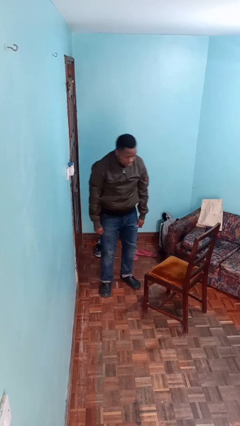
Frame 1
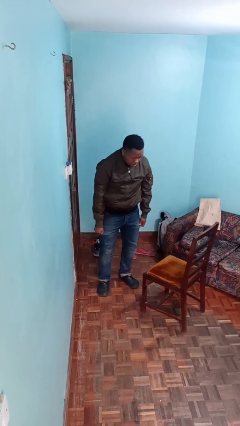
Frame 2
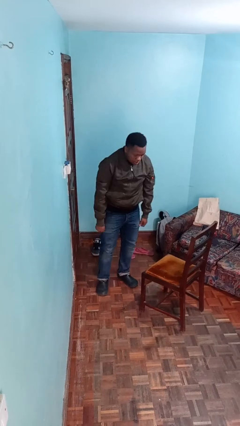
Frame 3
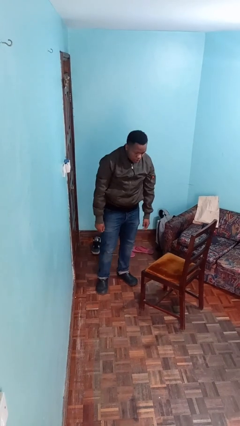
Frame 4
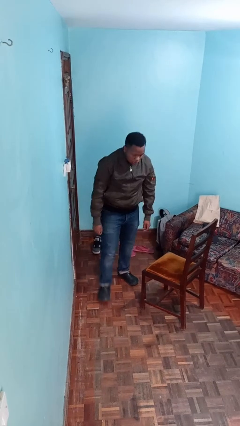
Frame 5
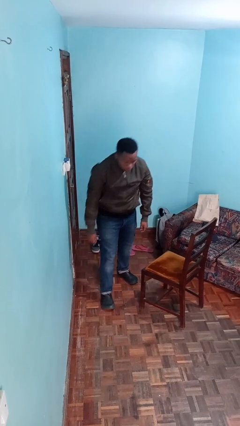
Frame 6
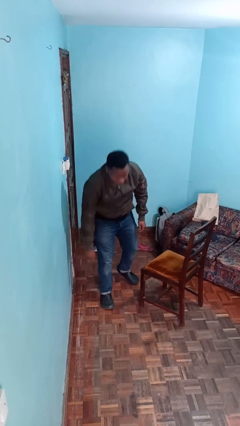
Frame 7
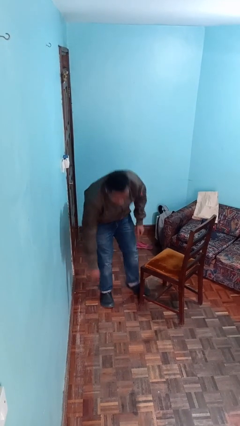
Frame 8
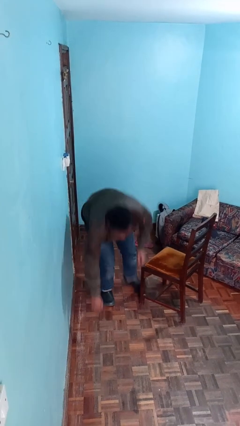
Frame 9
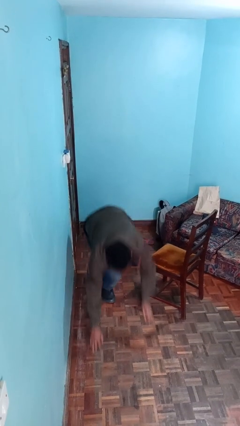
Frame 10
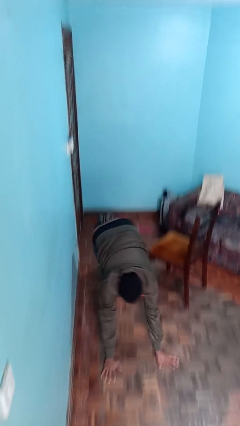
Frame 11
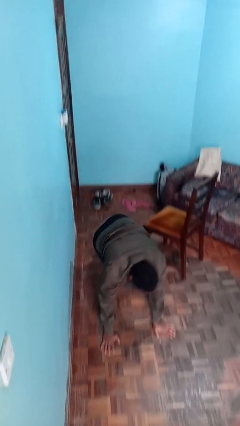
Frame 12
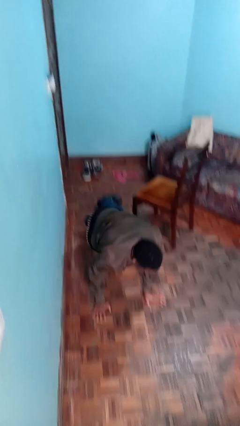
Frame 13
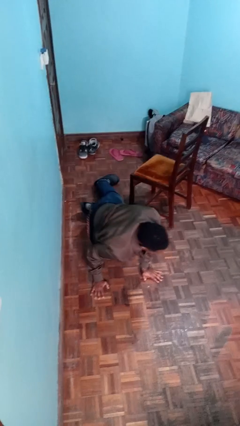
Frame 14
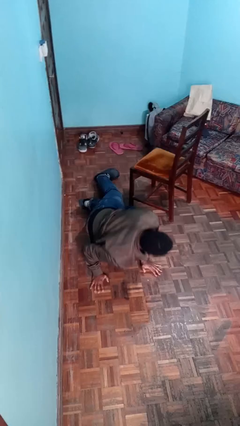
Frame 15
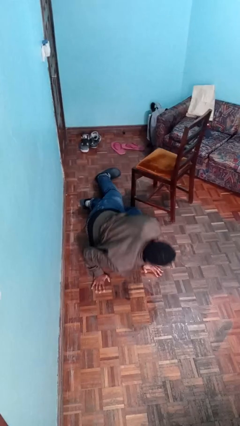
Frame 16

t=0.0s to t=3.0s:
person trips on object on floor

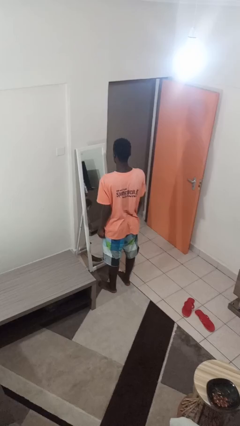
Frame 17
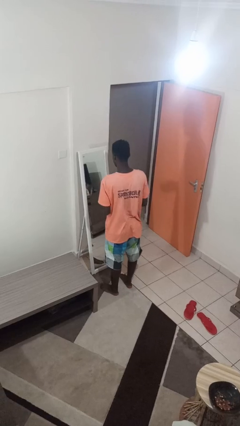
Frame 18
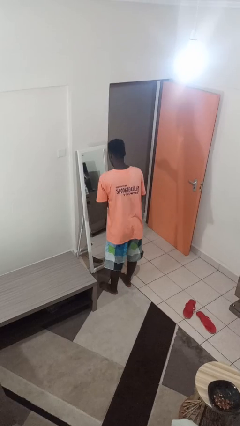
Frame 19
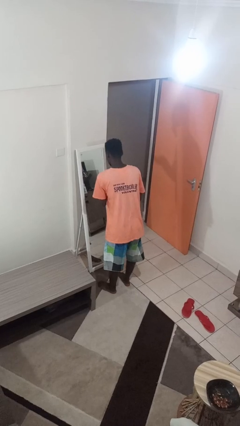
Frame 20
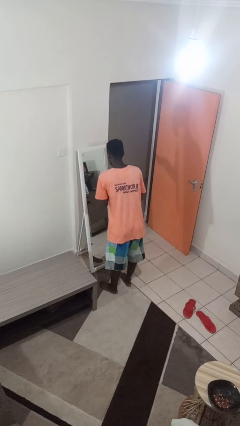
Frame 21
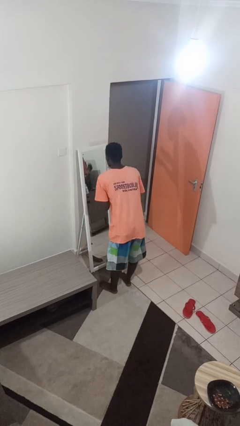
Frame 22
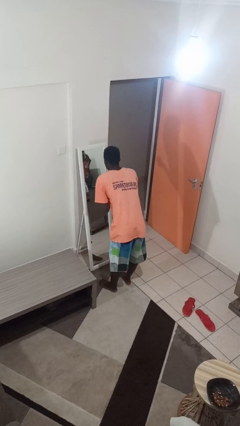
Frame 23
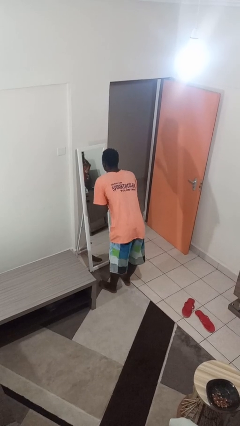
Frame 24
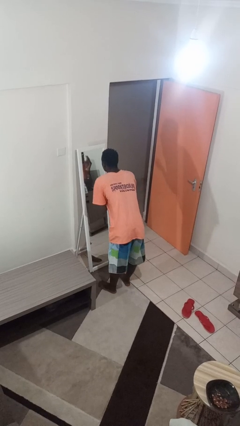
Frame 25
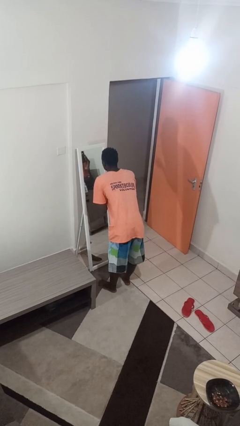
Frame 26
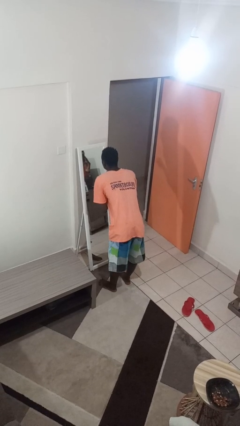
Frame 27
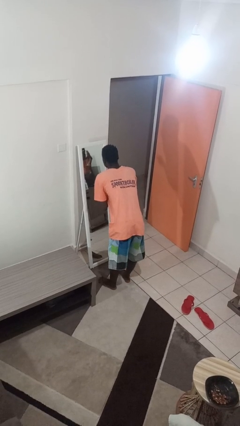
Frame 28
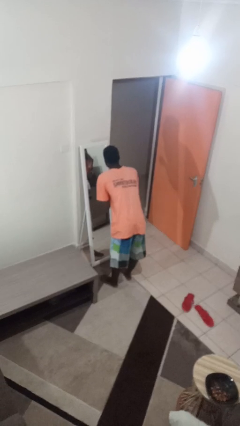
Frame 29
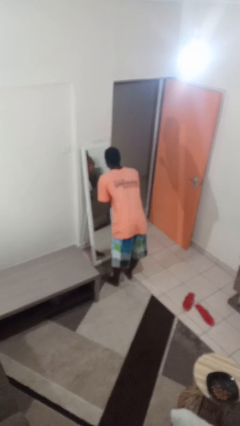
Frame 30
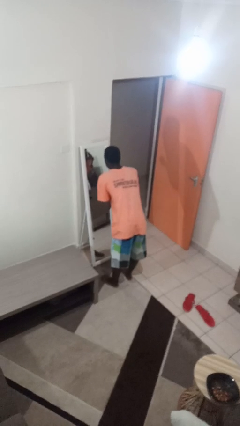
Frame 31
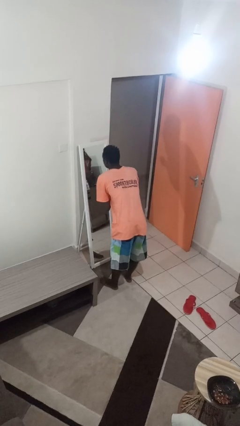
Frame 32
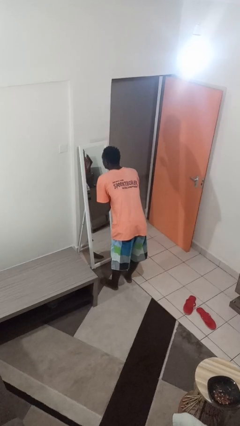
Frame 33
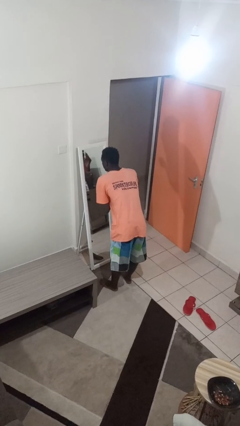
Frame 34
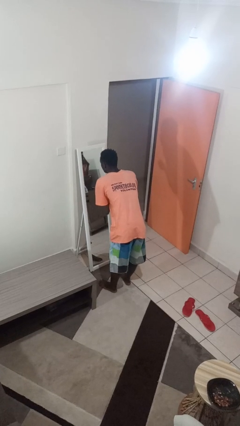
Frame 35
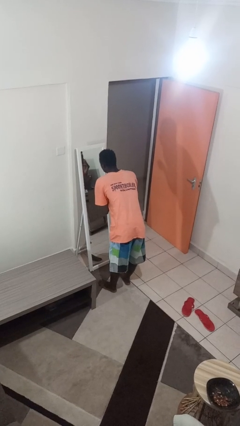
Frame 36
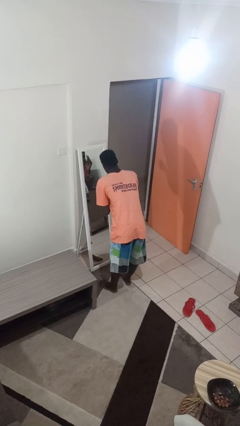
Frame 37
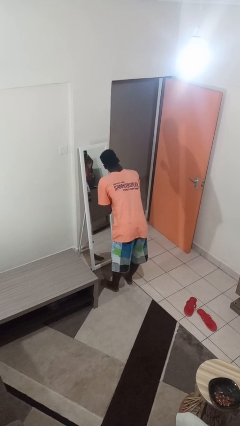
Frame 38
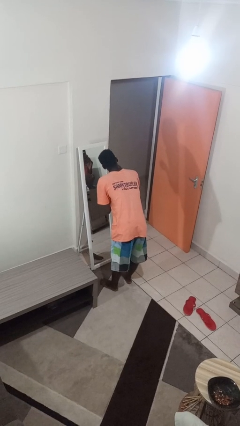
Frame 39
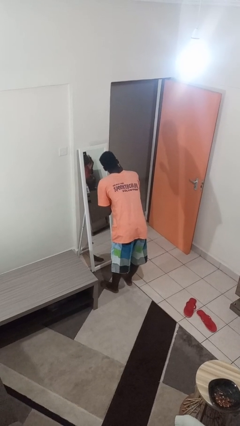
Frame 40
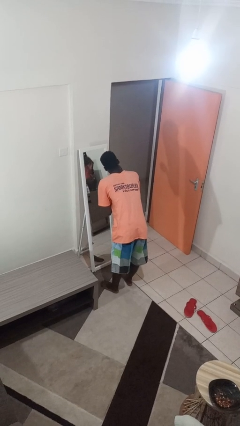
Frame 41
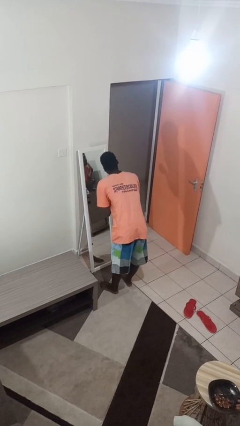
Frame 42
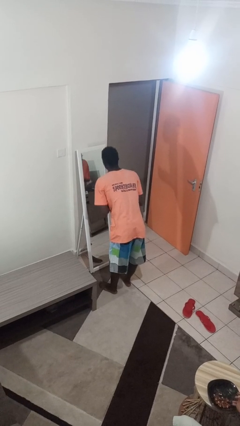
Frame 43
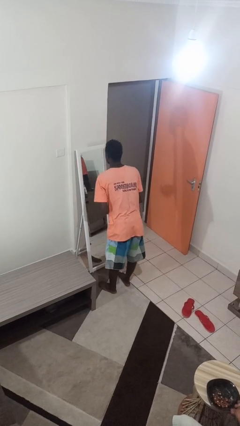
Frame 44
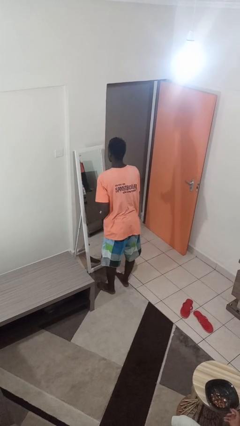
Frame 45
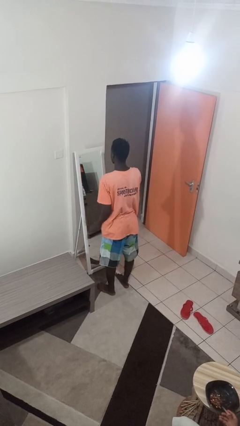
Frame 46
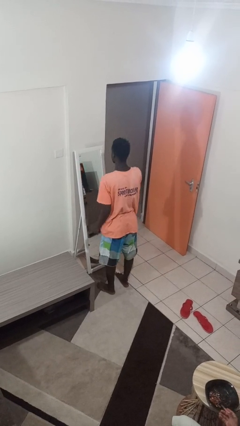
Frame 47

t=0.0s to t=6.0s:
person applies foundation makeup

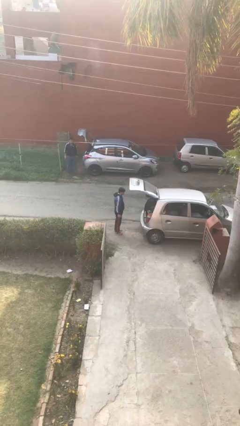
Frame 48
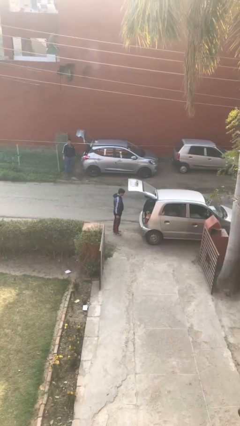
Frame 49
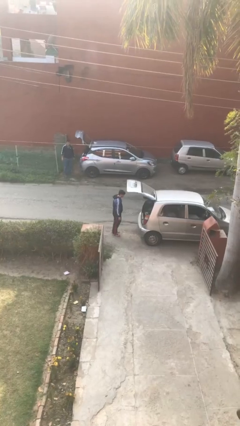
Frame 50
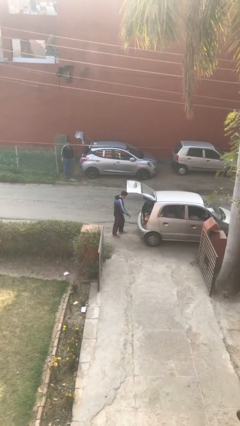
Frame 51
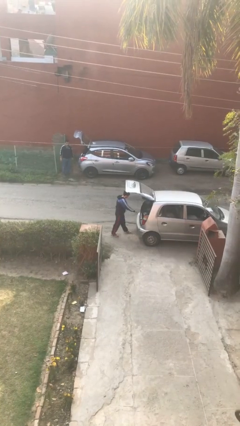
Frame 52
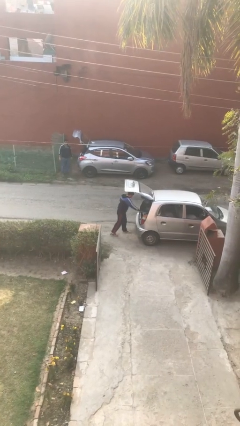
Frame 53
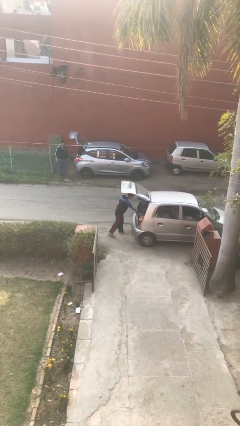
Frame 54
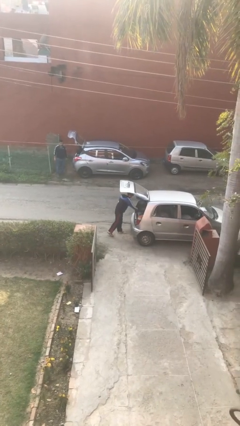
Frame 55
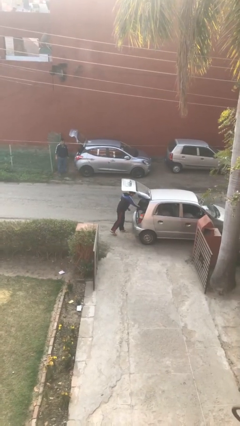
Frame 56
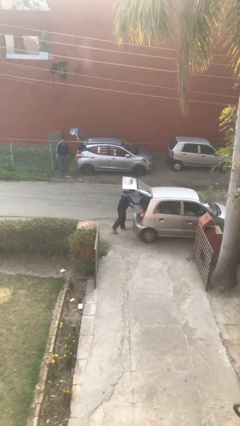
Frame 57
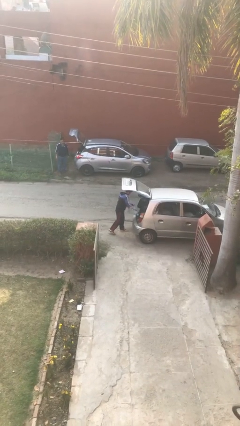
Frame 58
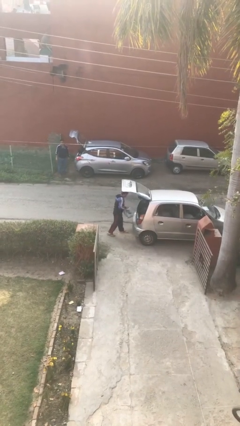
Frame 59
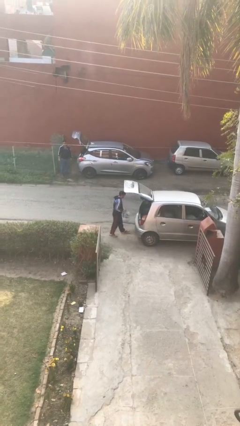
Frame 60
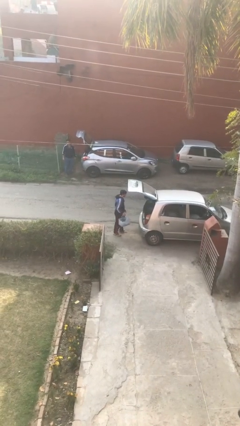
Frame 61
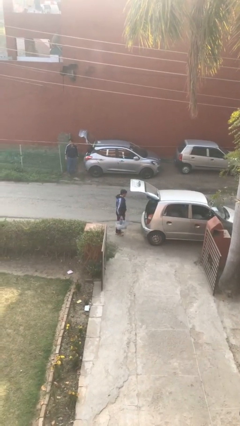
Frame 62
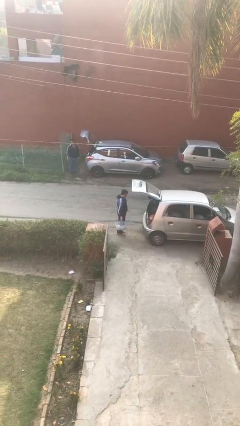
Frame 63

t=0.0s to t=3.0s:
person unloads car

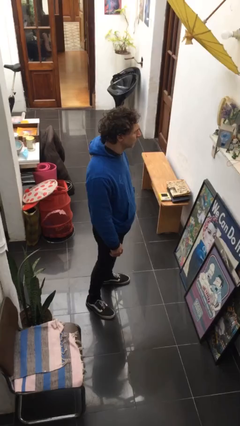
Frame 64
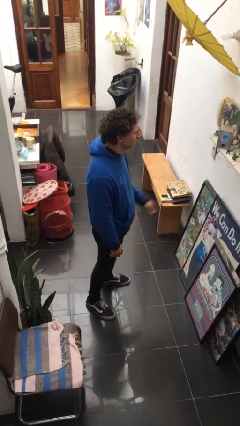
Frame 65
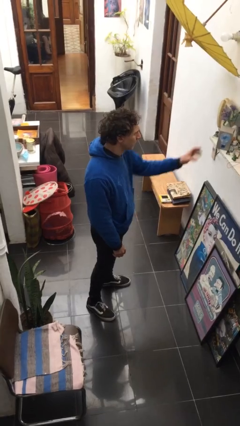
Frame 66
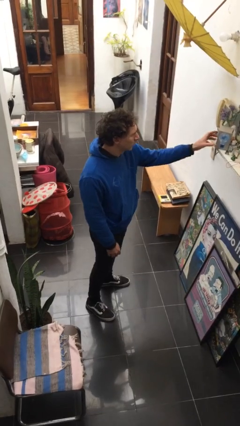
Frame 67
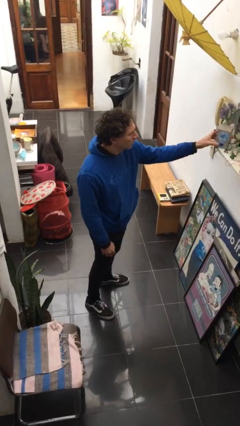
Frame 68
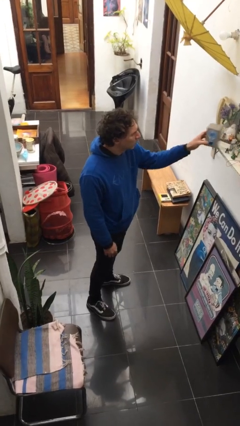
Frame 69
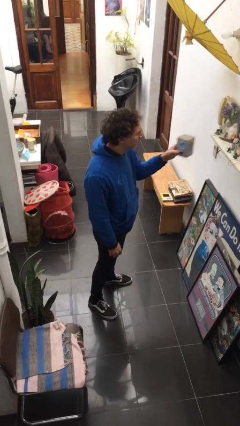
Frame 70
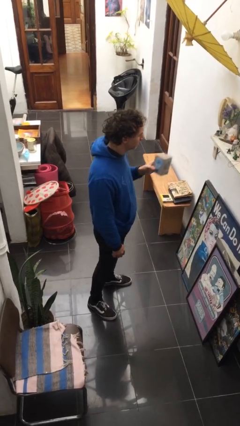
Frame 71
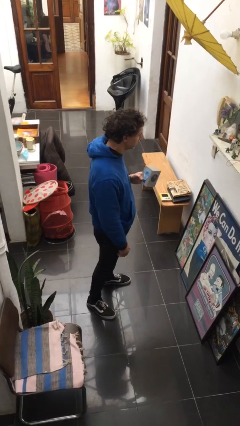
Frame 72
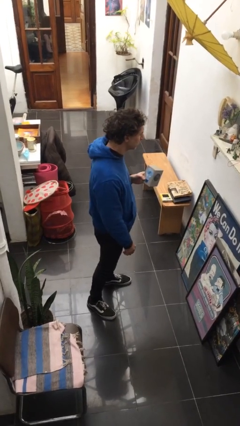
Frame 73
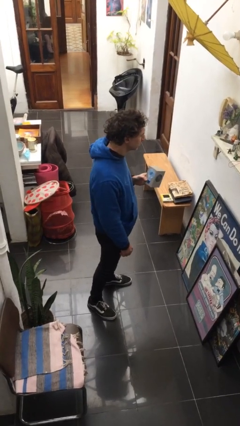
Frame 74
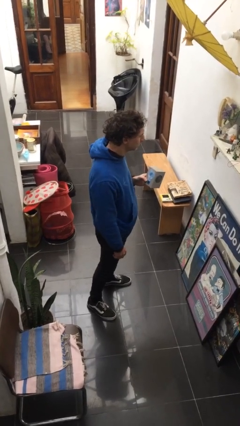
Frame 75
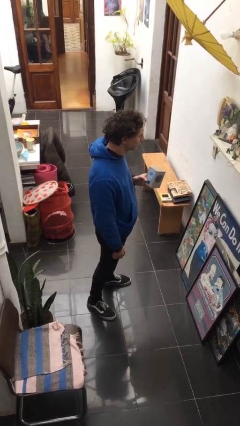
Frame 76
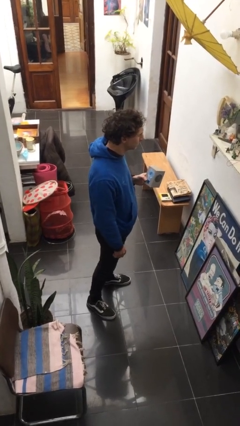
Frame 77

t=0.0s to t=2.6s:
person picks up object from countertop

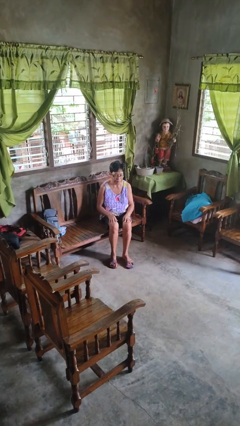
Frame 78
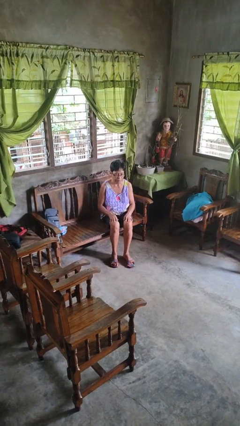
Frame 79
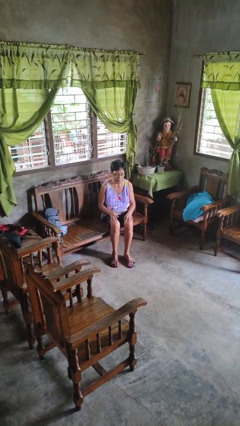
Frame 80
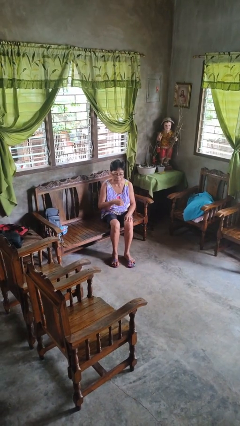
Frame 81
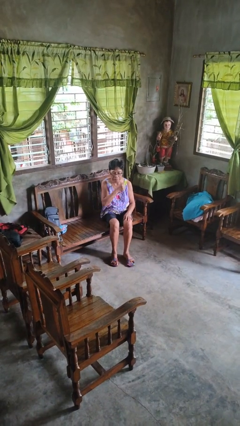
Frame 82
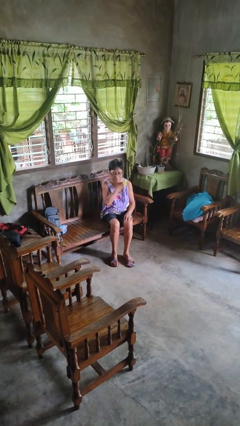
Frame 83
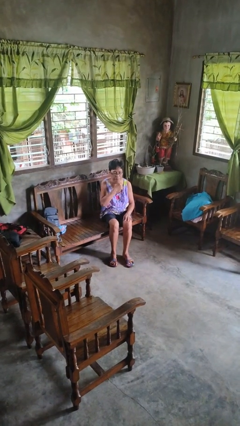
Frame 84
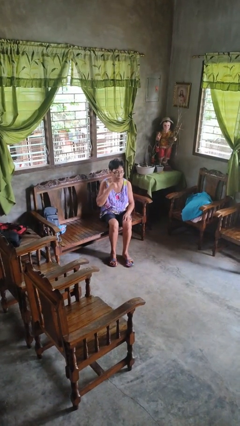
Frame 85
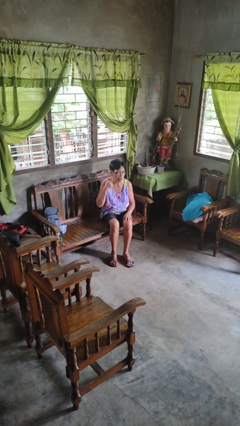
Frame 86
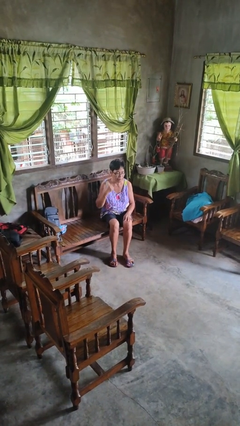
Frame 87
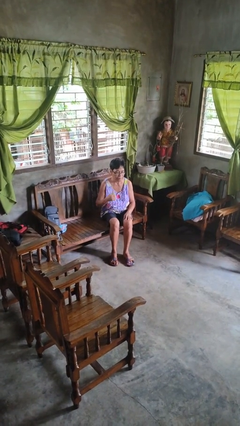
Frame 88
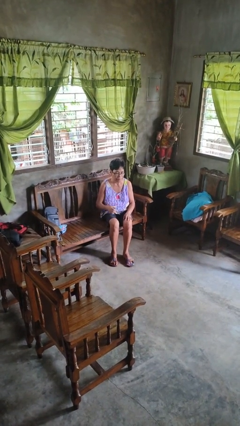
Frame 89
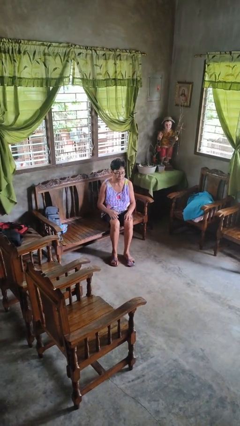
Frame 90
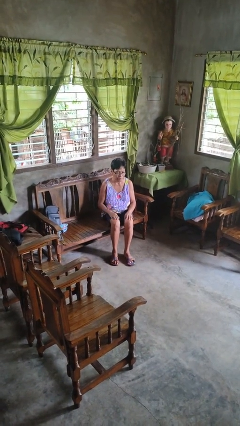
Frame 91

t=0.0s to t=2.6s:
person gestures cut

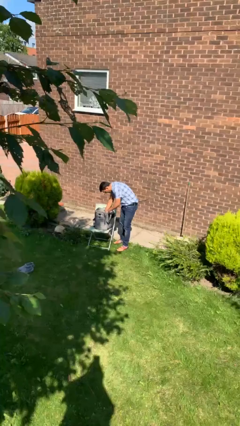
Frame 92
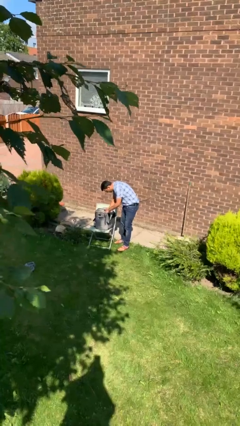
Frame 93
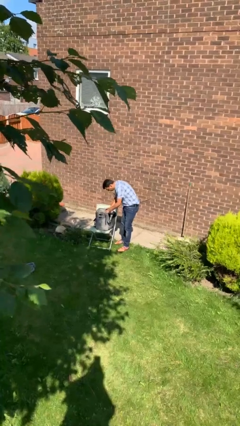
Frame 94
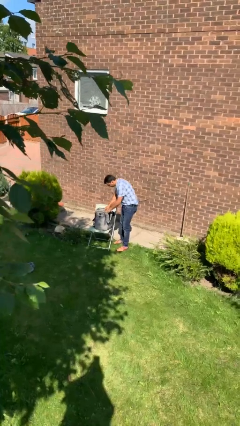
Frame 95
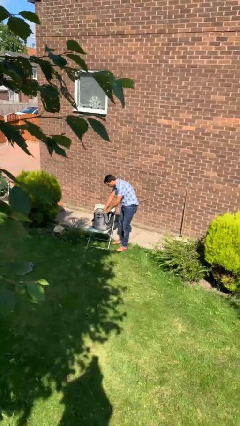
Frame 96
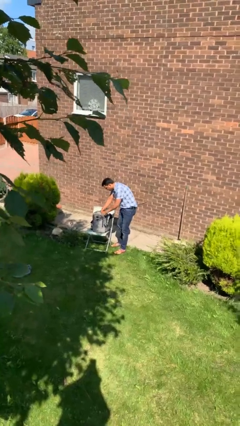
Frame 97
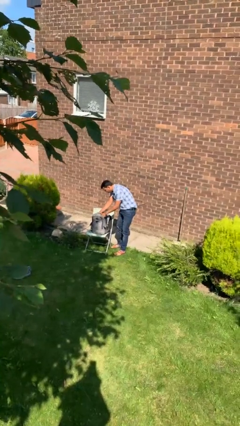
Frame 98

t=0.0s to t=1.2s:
person takes object from backpack
